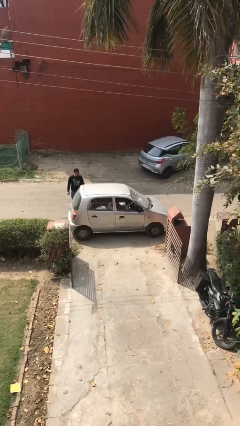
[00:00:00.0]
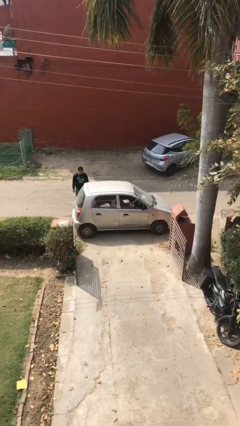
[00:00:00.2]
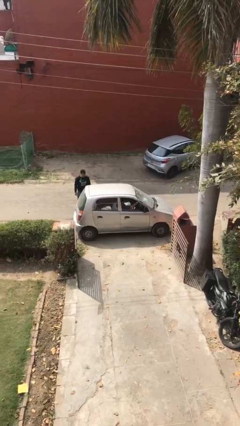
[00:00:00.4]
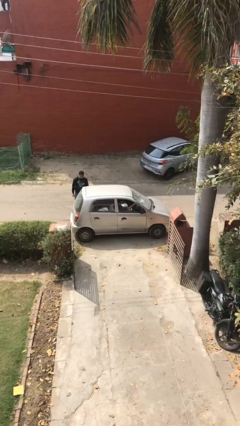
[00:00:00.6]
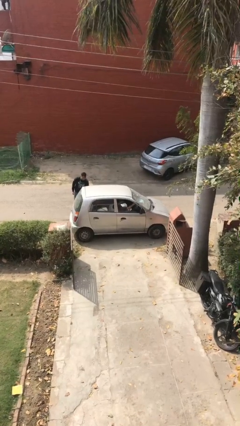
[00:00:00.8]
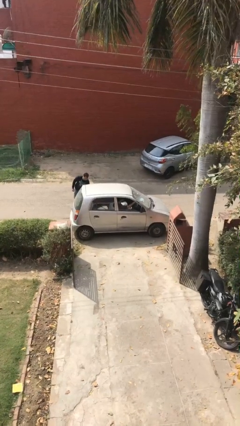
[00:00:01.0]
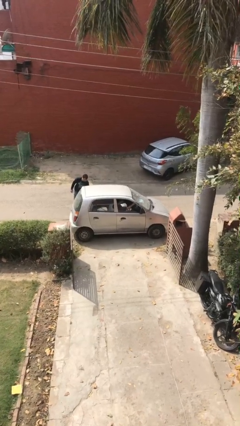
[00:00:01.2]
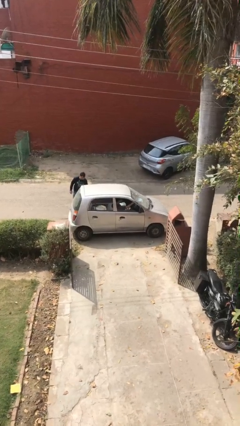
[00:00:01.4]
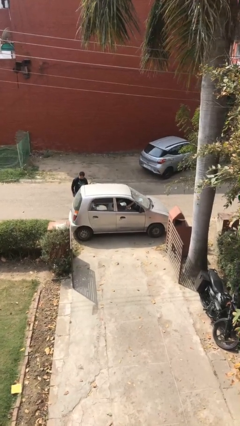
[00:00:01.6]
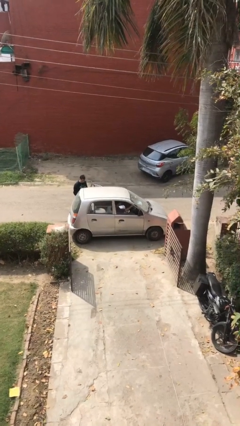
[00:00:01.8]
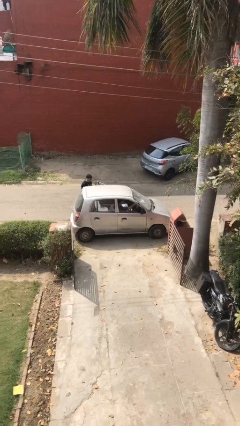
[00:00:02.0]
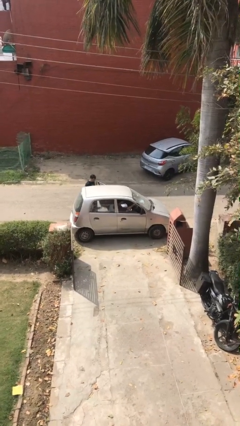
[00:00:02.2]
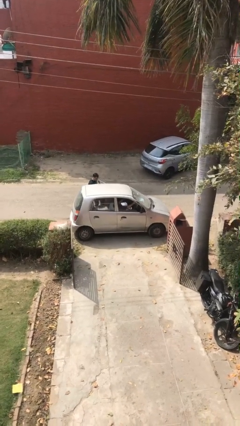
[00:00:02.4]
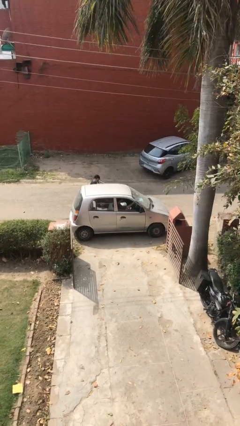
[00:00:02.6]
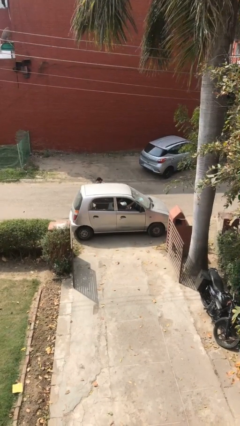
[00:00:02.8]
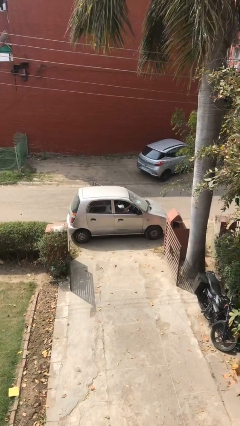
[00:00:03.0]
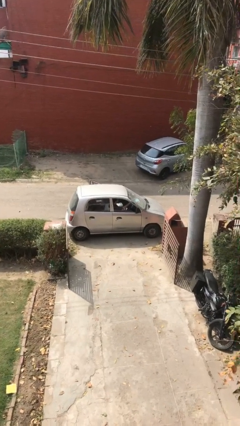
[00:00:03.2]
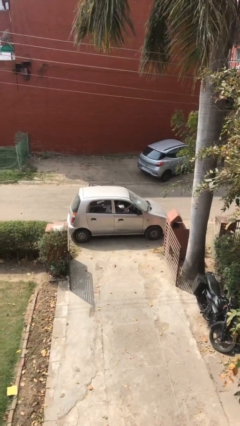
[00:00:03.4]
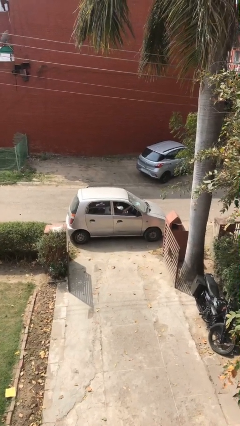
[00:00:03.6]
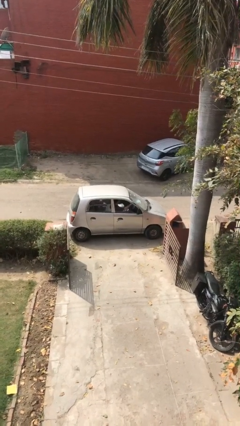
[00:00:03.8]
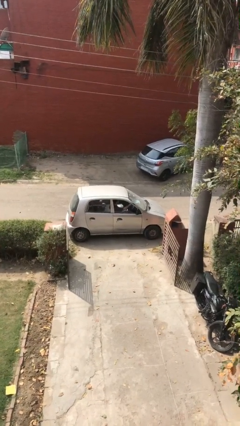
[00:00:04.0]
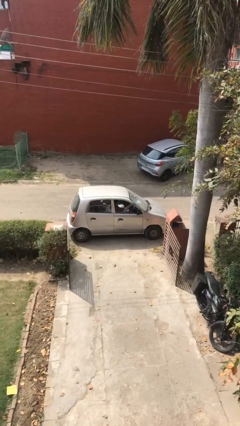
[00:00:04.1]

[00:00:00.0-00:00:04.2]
car picks up person

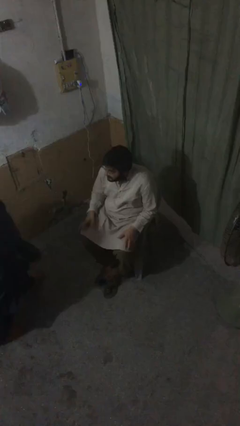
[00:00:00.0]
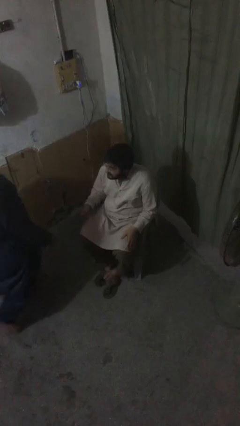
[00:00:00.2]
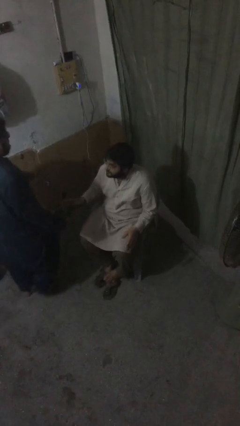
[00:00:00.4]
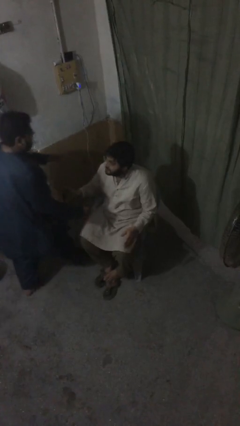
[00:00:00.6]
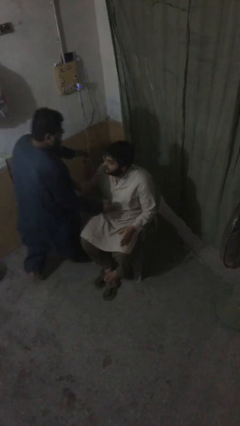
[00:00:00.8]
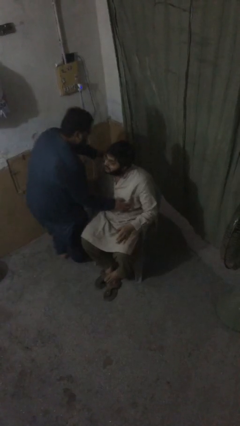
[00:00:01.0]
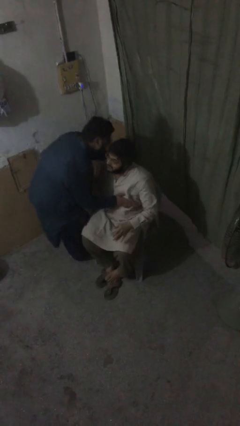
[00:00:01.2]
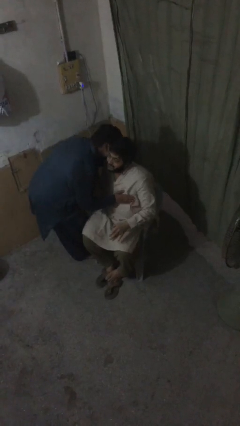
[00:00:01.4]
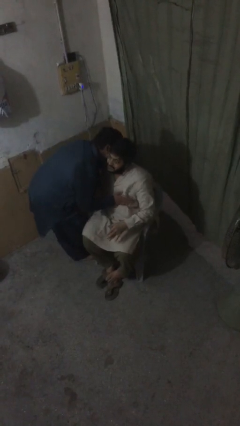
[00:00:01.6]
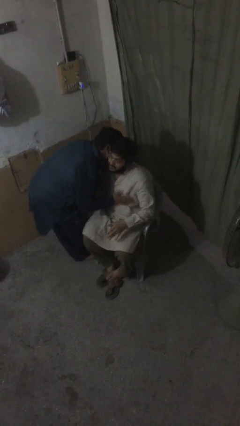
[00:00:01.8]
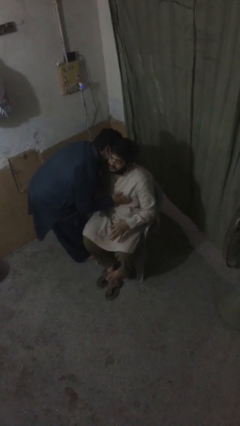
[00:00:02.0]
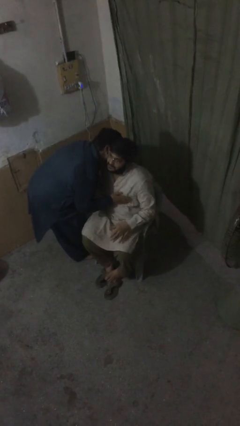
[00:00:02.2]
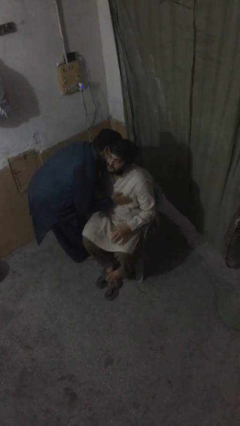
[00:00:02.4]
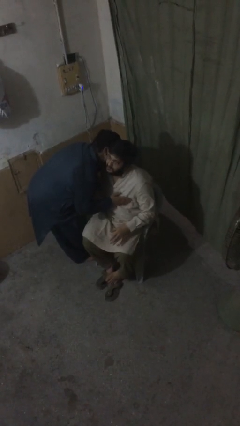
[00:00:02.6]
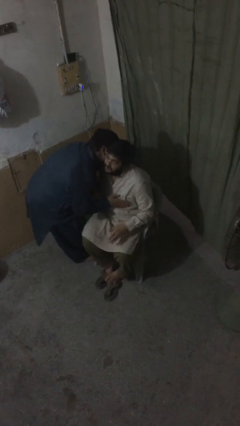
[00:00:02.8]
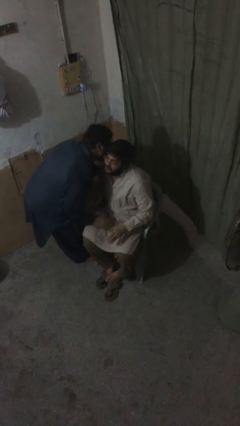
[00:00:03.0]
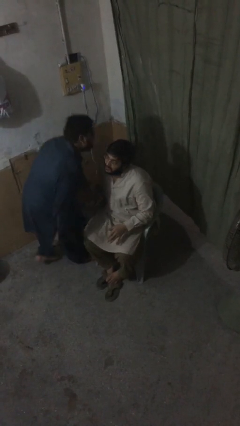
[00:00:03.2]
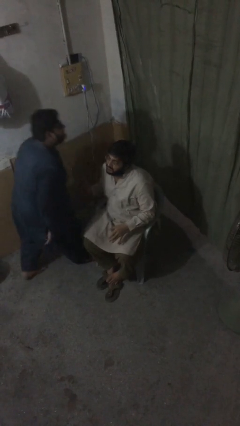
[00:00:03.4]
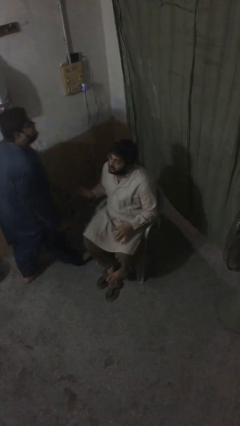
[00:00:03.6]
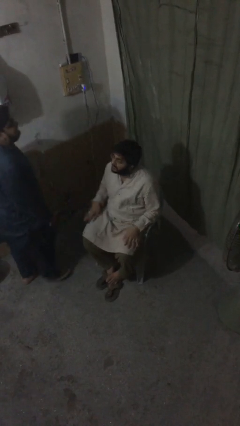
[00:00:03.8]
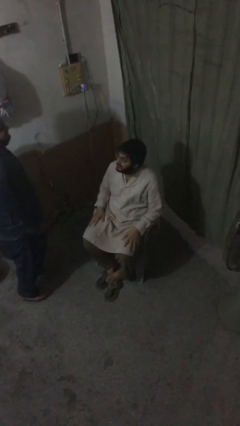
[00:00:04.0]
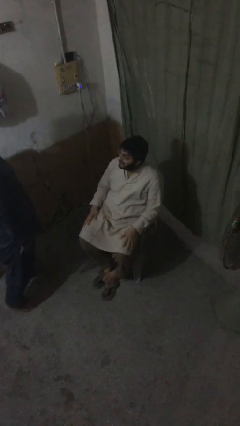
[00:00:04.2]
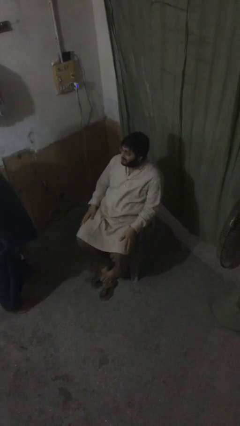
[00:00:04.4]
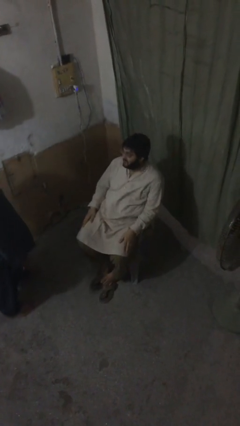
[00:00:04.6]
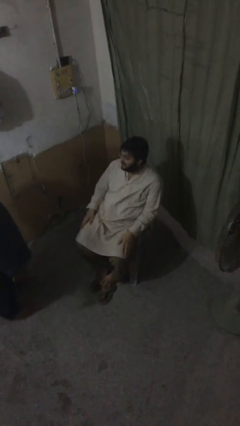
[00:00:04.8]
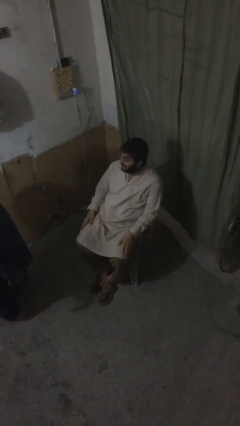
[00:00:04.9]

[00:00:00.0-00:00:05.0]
person embraces person

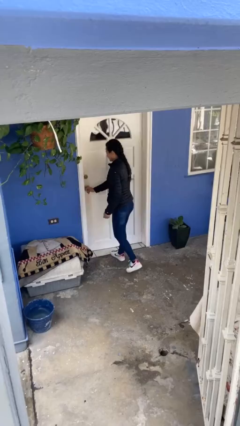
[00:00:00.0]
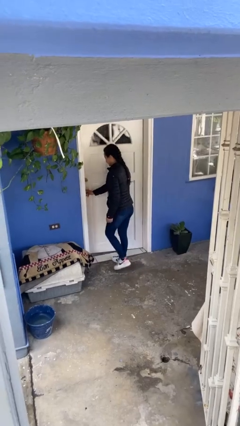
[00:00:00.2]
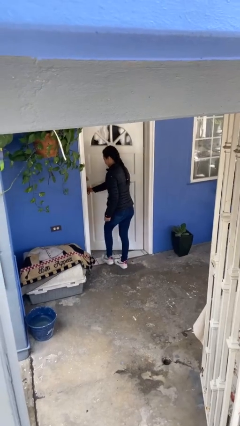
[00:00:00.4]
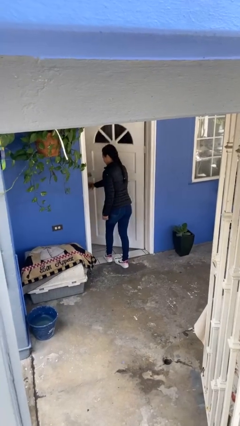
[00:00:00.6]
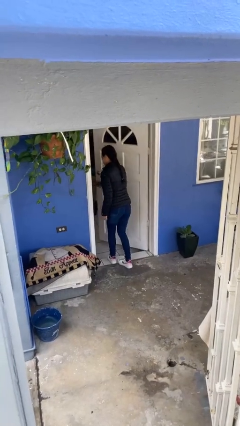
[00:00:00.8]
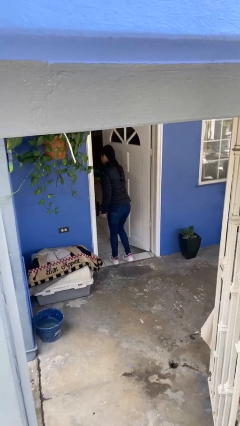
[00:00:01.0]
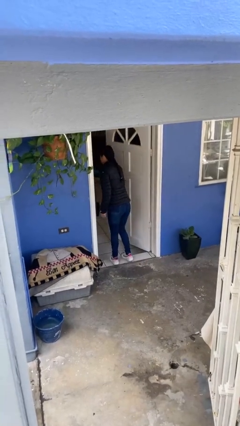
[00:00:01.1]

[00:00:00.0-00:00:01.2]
person opens facility door

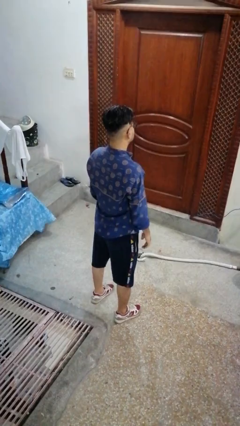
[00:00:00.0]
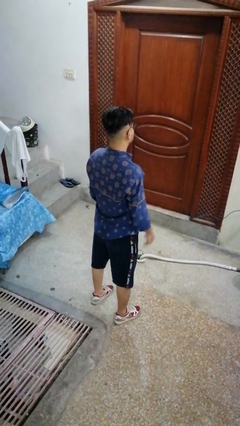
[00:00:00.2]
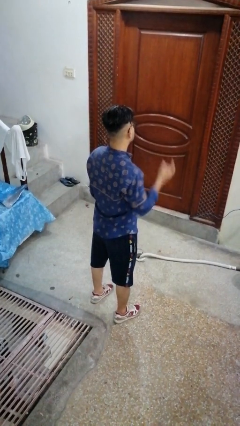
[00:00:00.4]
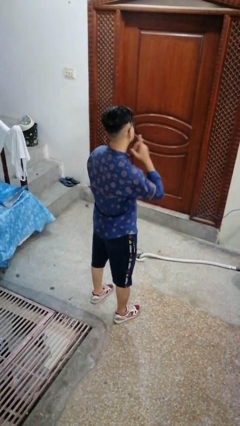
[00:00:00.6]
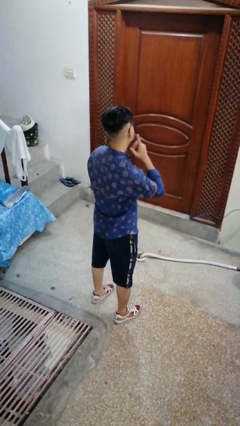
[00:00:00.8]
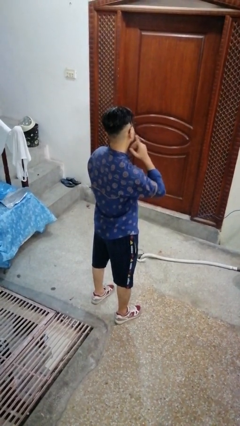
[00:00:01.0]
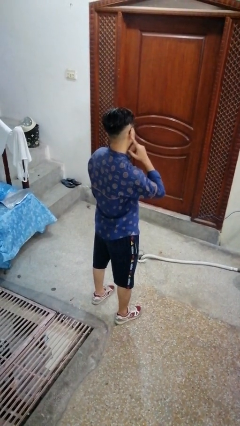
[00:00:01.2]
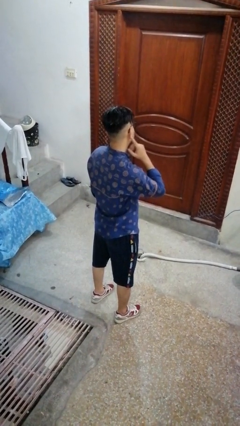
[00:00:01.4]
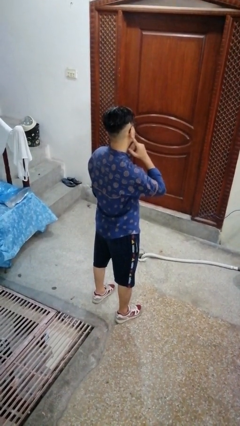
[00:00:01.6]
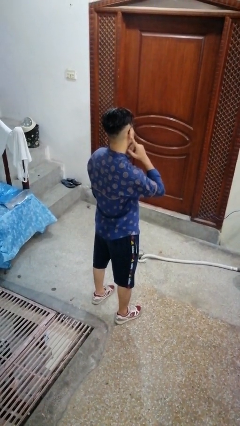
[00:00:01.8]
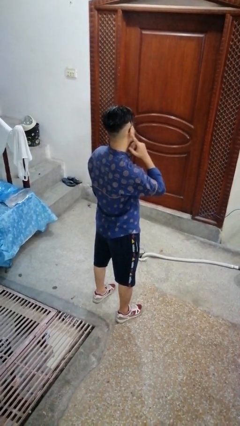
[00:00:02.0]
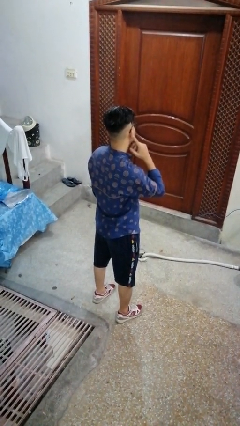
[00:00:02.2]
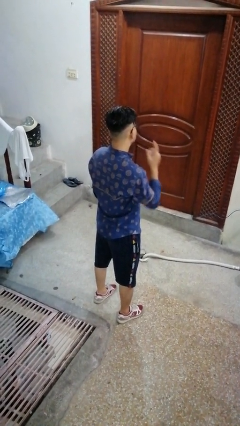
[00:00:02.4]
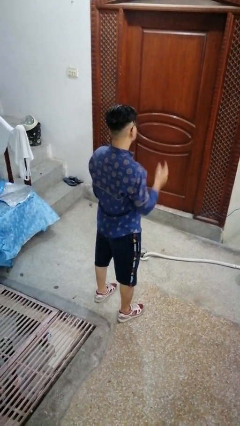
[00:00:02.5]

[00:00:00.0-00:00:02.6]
person gestures listen closely

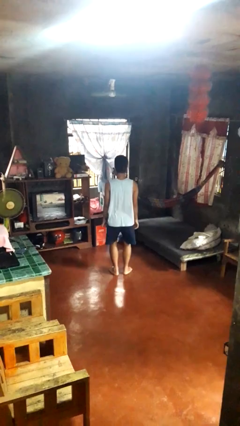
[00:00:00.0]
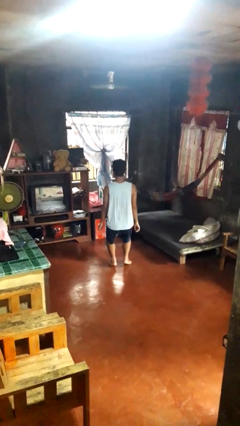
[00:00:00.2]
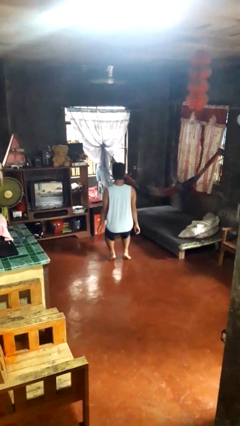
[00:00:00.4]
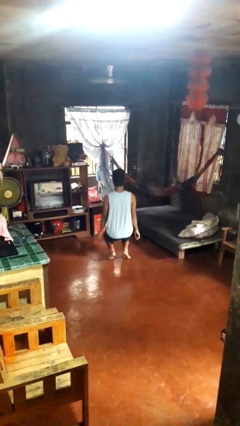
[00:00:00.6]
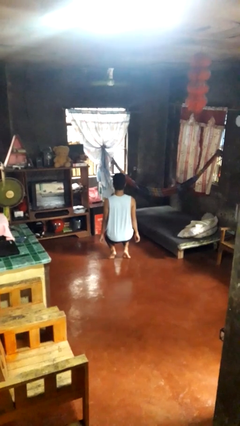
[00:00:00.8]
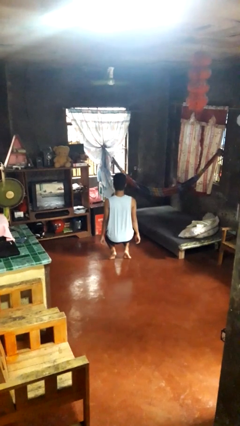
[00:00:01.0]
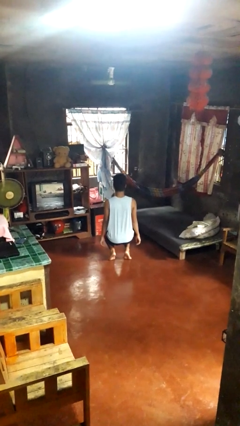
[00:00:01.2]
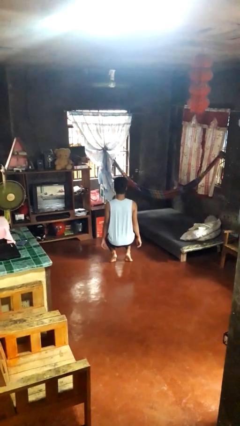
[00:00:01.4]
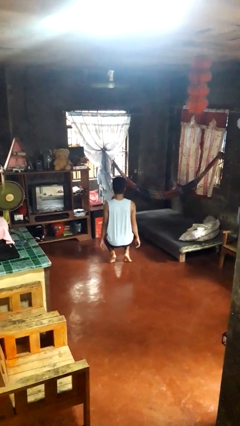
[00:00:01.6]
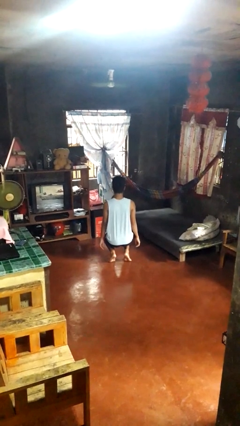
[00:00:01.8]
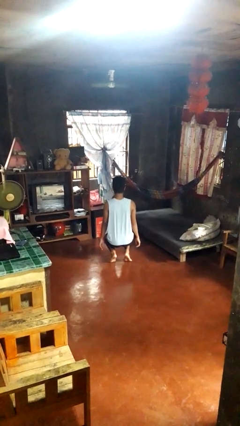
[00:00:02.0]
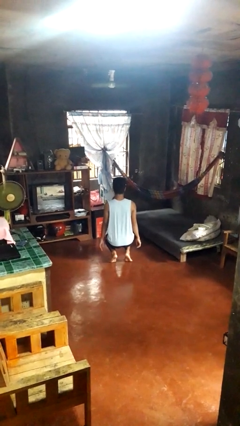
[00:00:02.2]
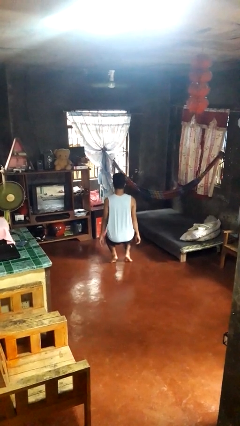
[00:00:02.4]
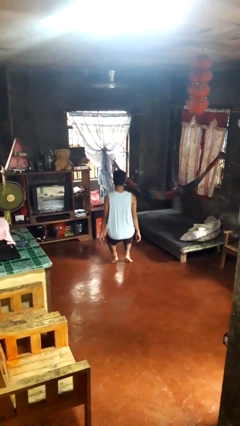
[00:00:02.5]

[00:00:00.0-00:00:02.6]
person squats

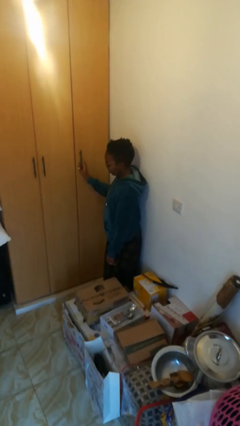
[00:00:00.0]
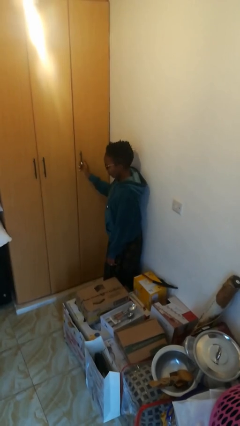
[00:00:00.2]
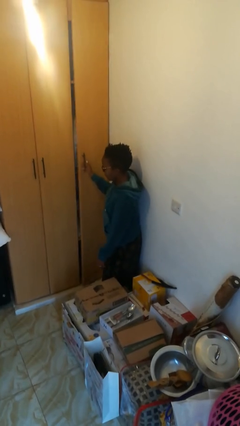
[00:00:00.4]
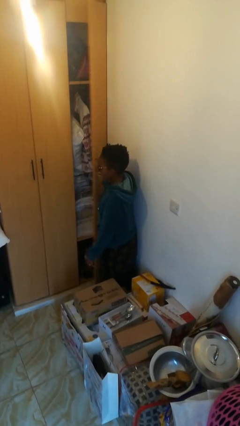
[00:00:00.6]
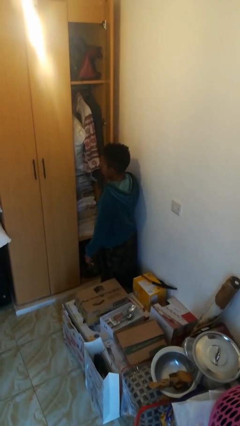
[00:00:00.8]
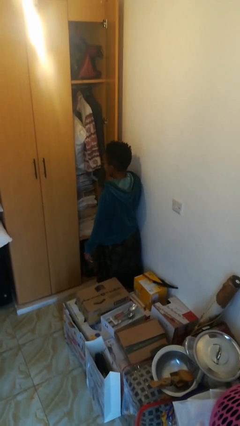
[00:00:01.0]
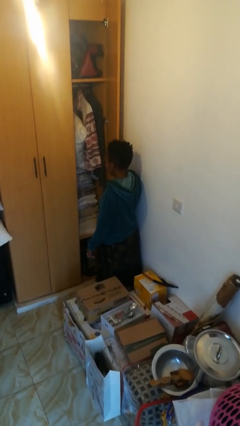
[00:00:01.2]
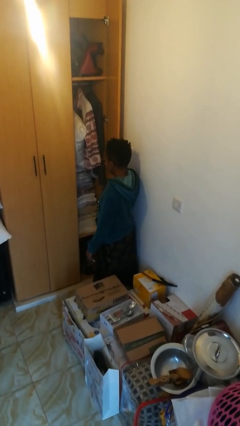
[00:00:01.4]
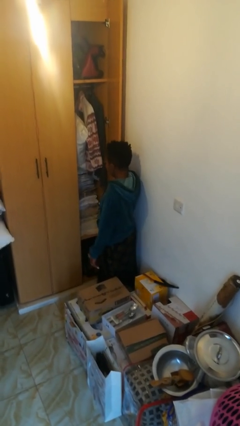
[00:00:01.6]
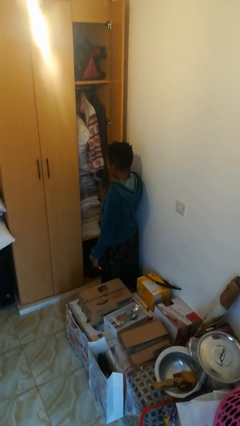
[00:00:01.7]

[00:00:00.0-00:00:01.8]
person opens closet door
